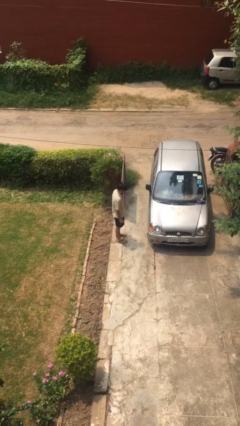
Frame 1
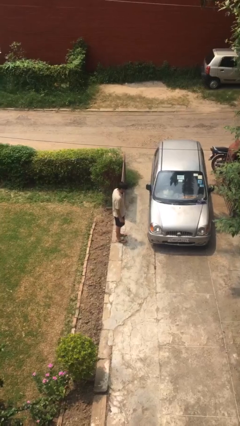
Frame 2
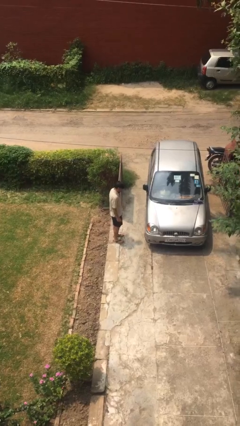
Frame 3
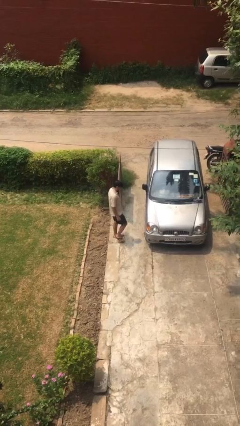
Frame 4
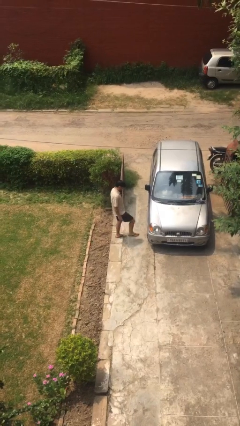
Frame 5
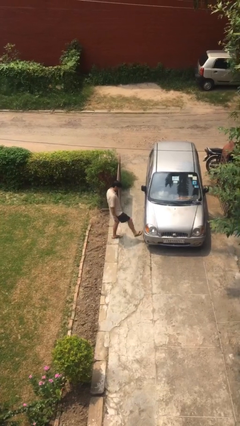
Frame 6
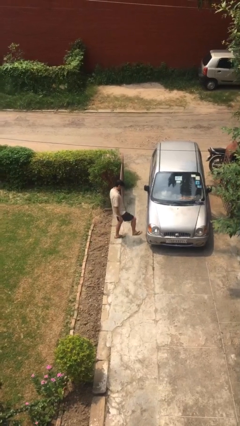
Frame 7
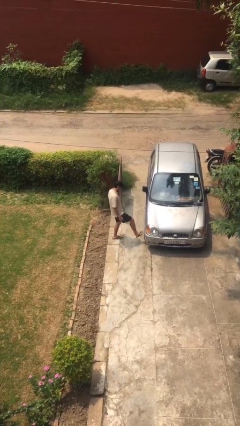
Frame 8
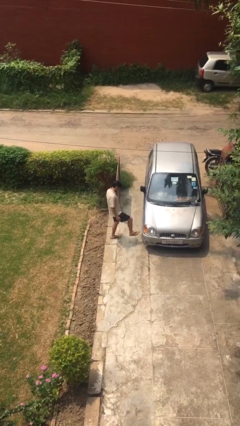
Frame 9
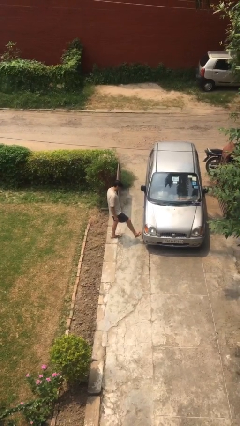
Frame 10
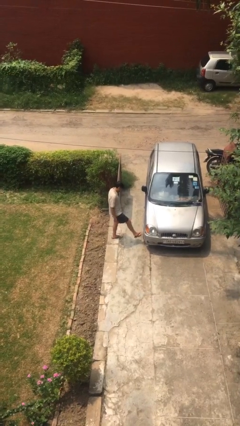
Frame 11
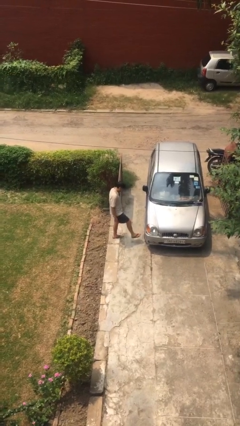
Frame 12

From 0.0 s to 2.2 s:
person kicks car tires

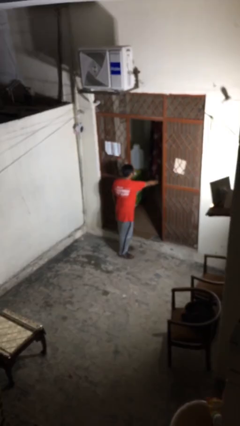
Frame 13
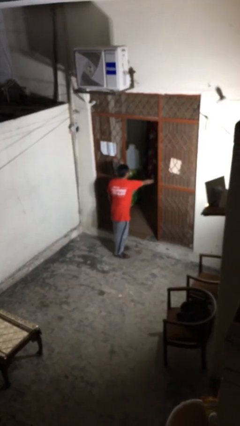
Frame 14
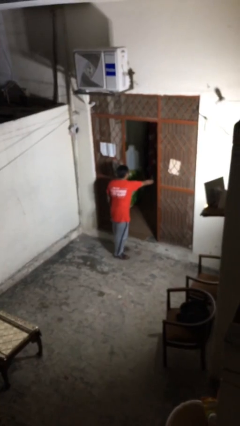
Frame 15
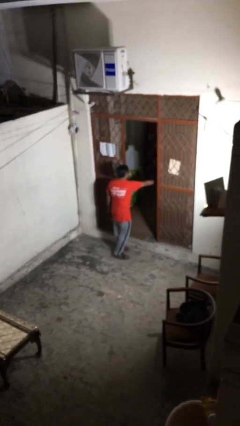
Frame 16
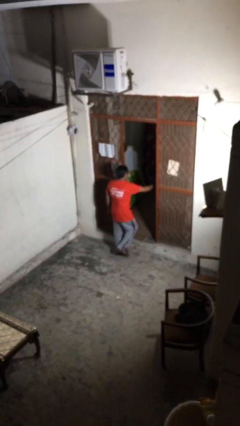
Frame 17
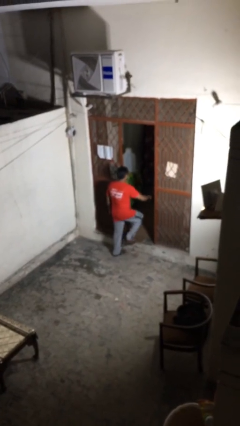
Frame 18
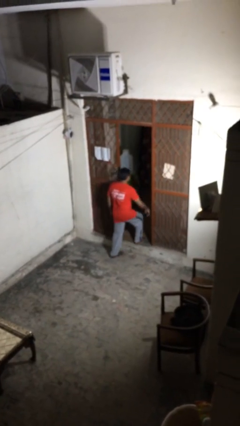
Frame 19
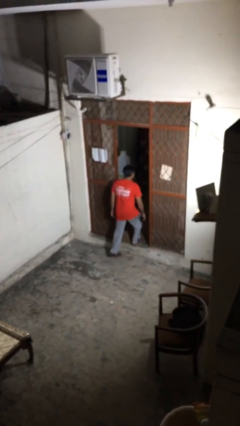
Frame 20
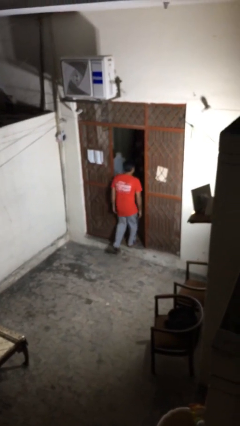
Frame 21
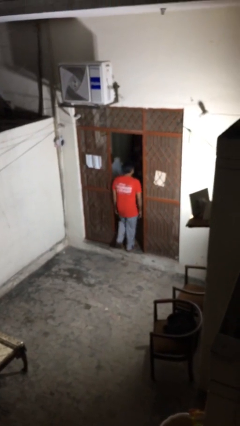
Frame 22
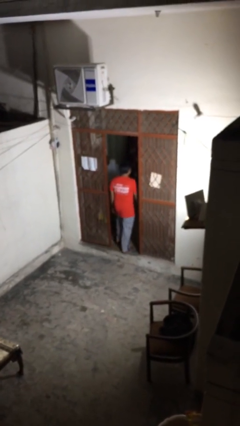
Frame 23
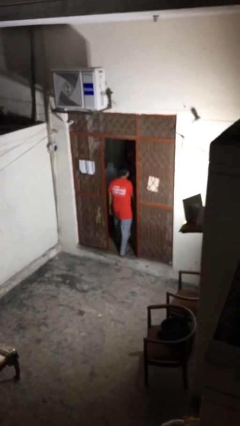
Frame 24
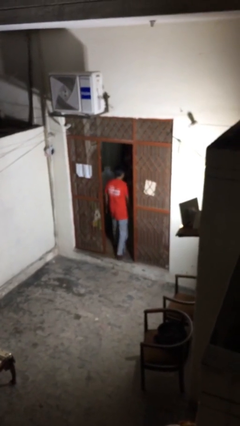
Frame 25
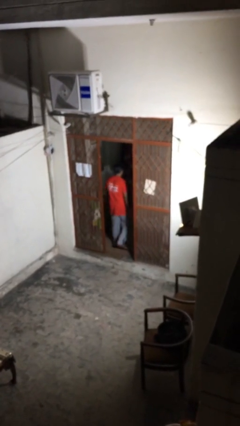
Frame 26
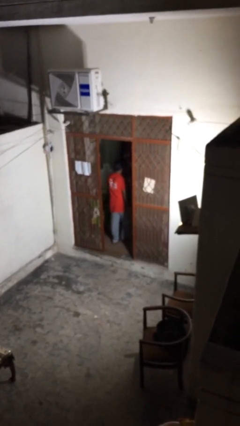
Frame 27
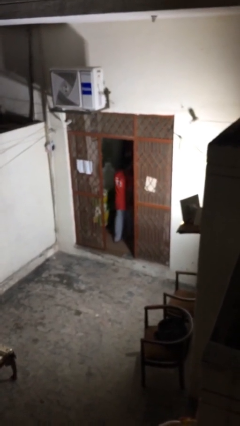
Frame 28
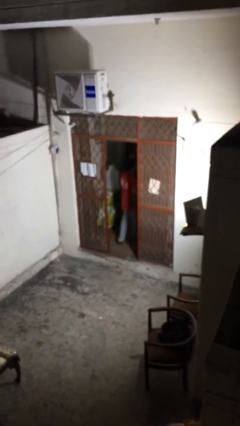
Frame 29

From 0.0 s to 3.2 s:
person exits scene through structure

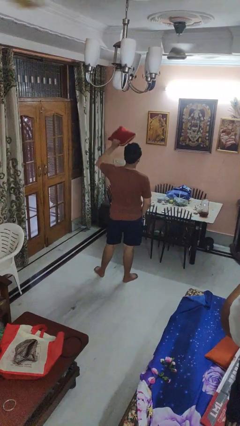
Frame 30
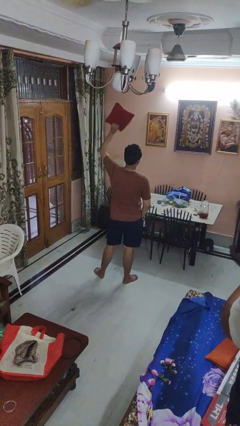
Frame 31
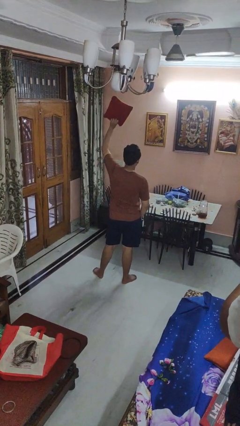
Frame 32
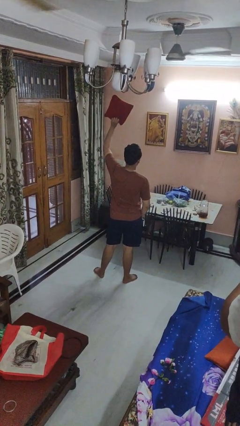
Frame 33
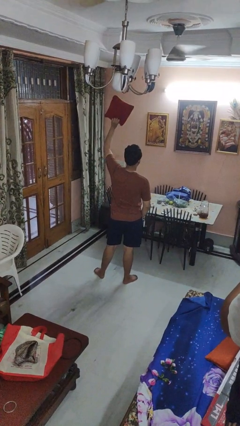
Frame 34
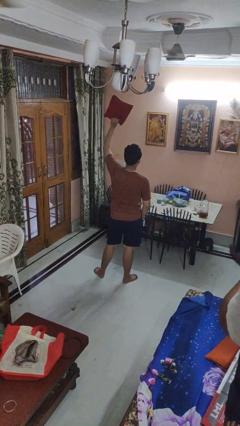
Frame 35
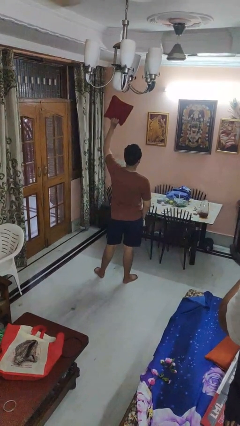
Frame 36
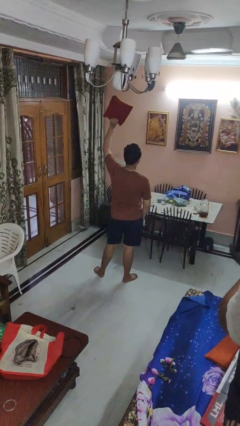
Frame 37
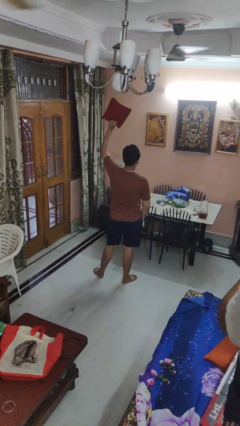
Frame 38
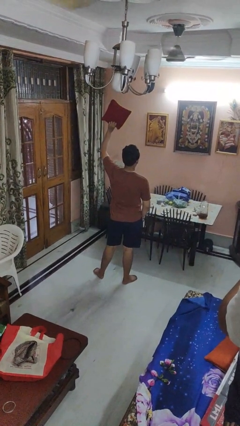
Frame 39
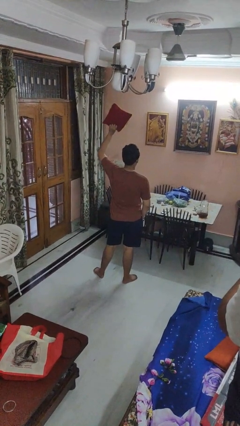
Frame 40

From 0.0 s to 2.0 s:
person holds object above head

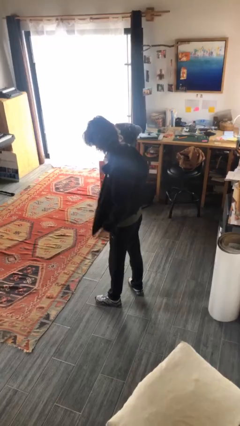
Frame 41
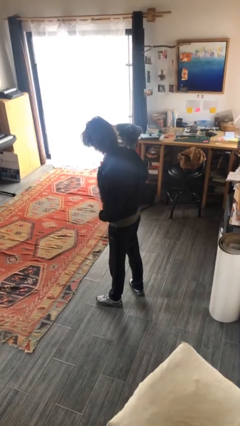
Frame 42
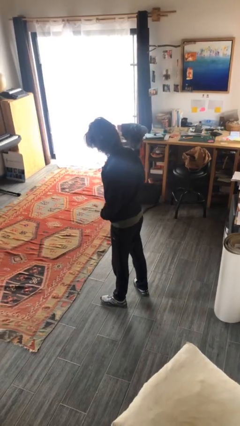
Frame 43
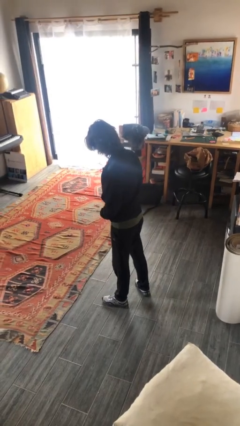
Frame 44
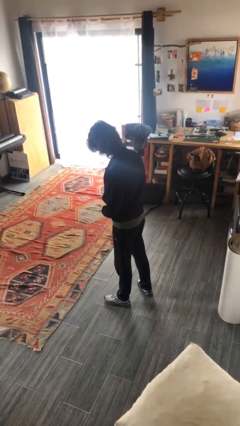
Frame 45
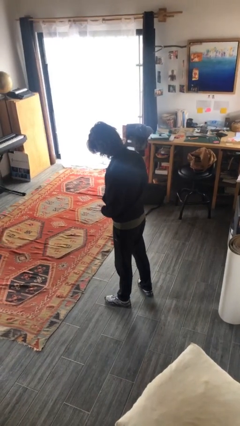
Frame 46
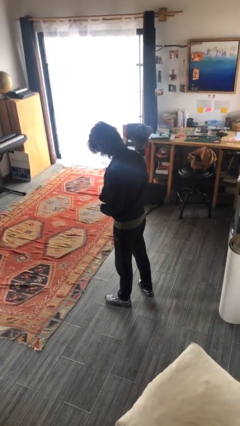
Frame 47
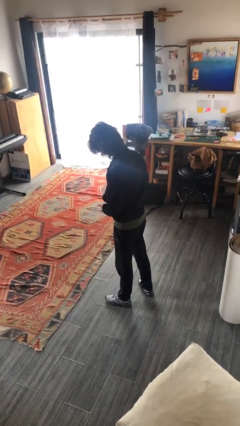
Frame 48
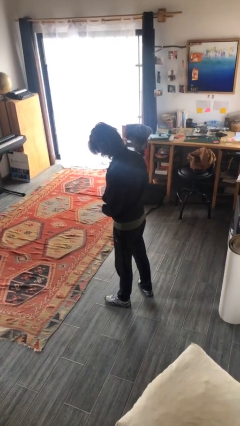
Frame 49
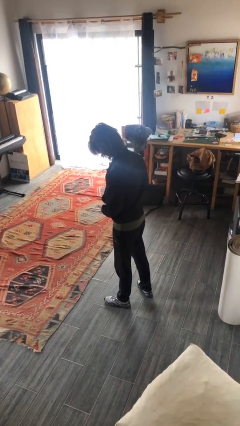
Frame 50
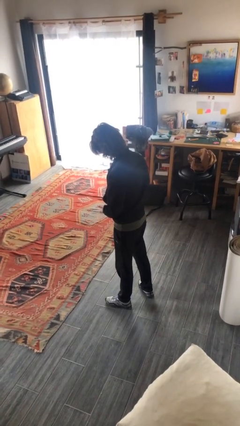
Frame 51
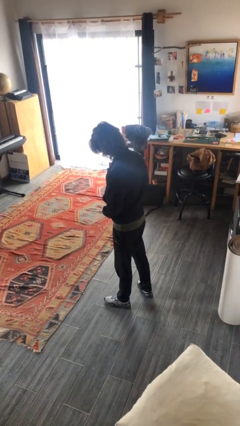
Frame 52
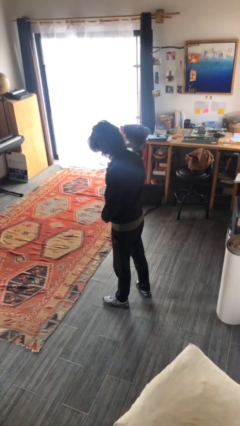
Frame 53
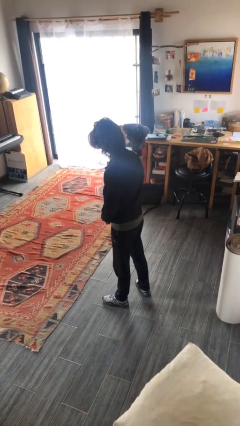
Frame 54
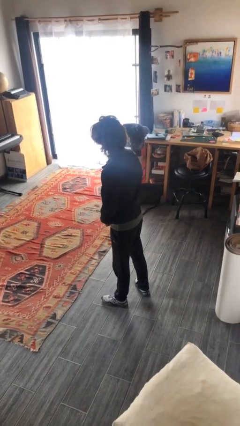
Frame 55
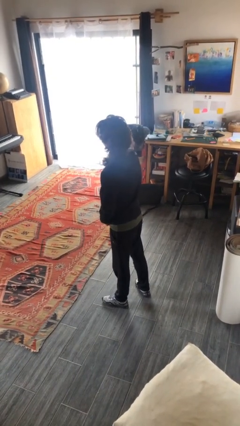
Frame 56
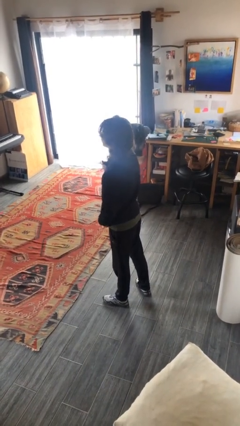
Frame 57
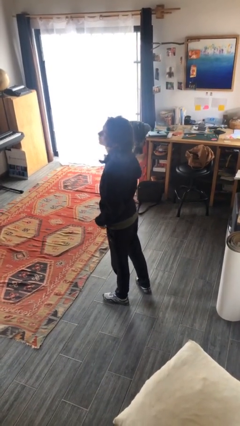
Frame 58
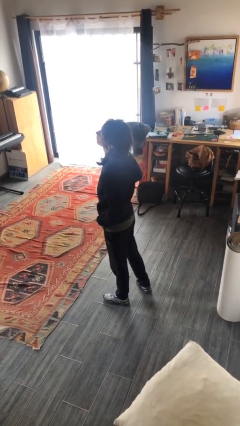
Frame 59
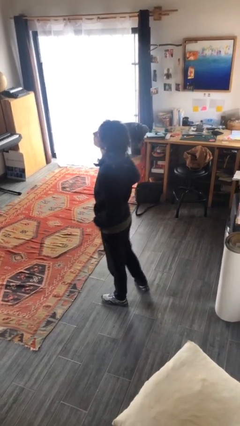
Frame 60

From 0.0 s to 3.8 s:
person zips up jacket

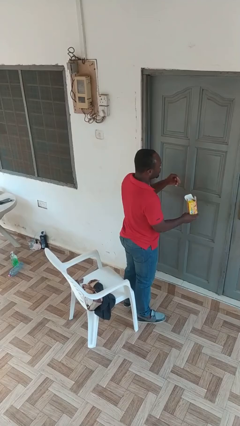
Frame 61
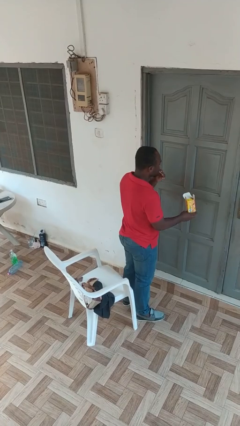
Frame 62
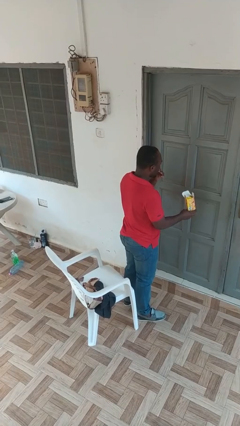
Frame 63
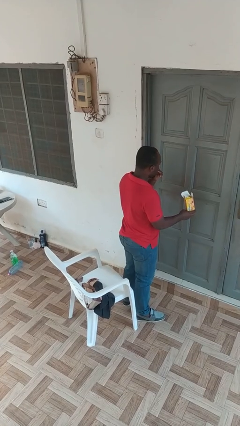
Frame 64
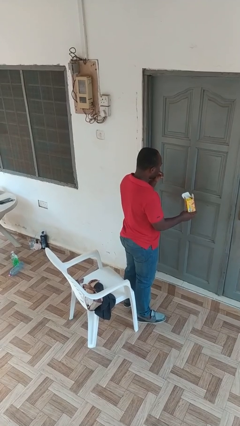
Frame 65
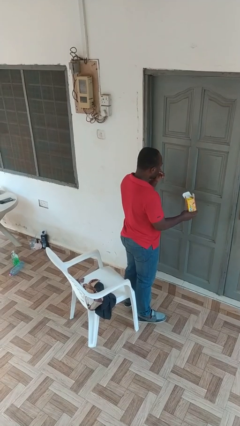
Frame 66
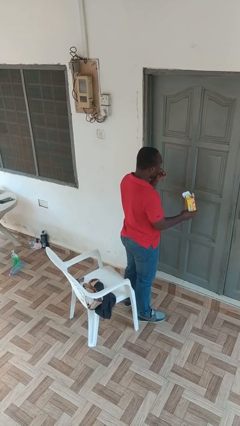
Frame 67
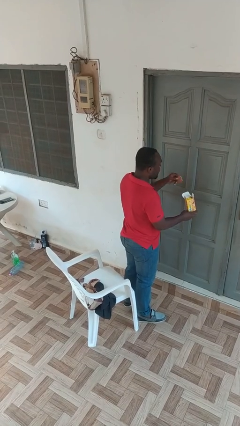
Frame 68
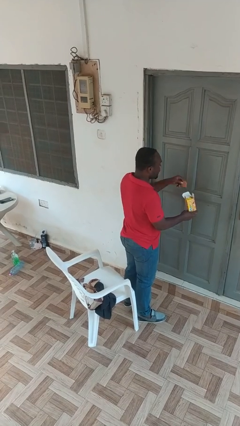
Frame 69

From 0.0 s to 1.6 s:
person eats snack from bag

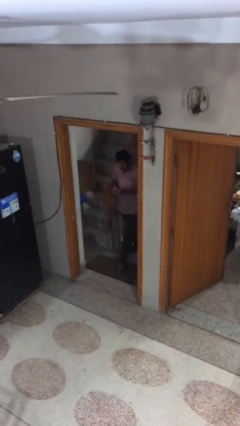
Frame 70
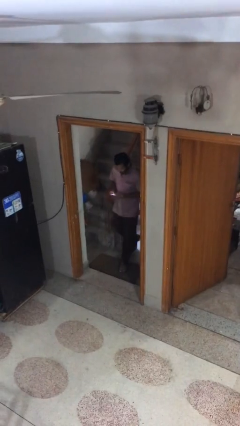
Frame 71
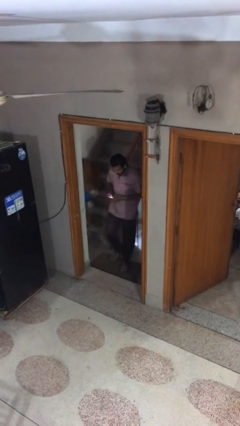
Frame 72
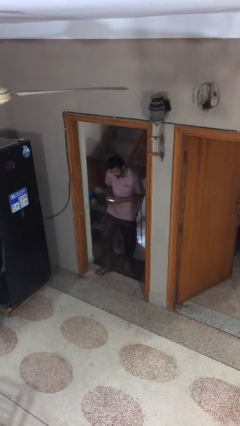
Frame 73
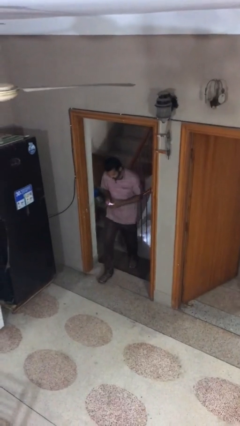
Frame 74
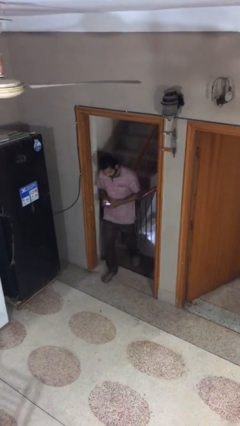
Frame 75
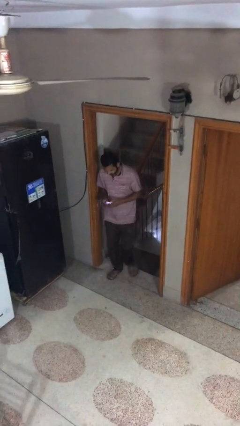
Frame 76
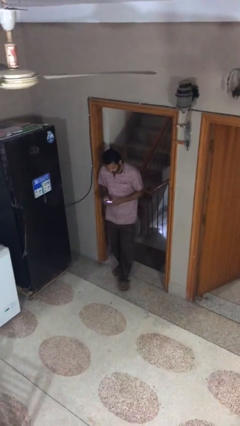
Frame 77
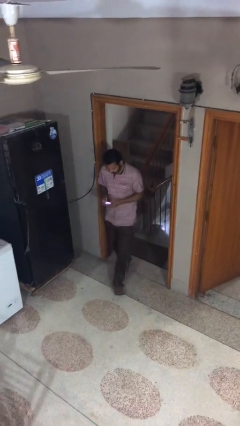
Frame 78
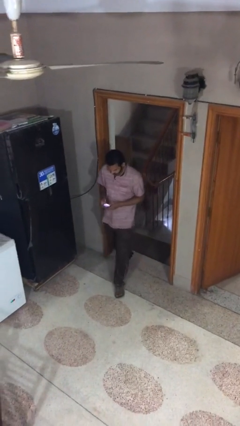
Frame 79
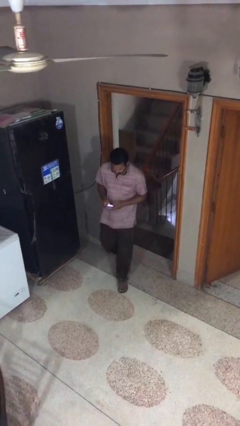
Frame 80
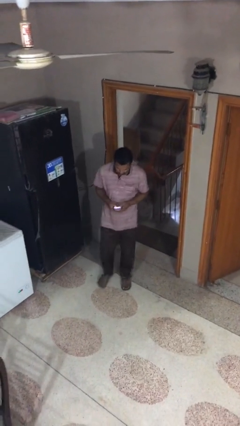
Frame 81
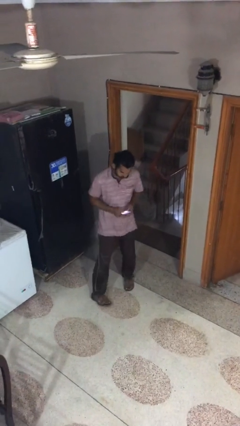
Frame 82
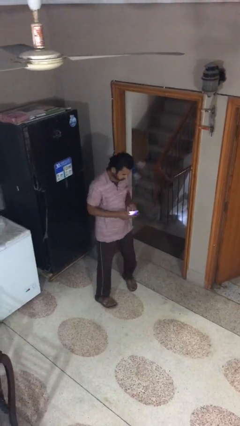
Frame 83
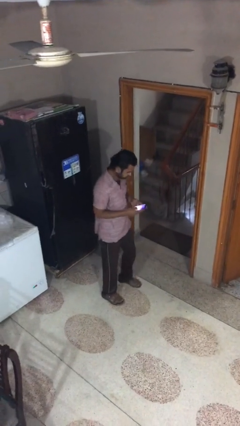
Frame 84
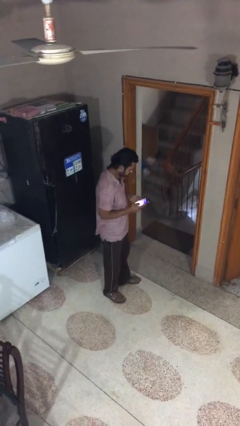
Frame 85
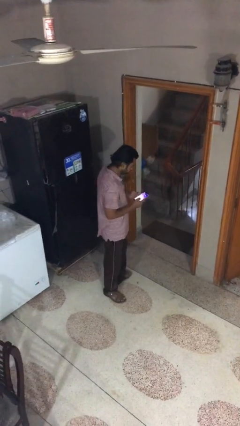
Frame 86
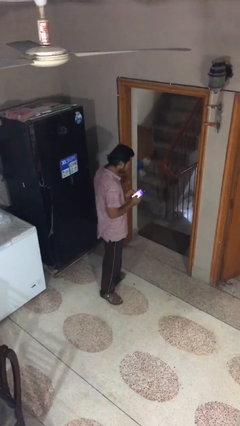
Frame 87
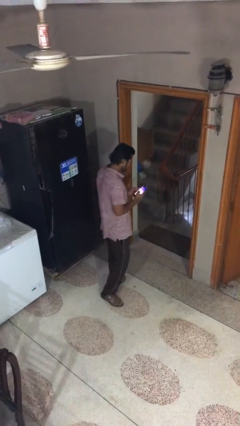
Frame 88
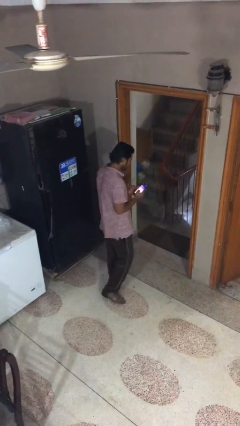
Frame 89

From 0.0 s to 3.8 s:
person enters scene through structure

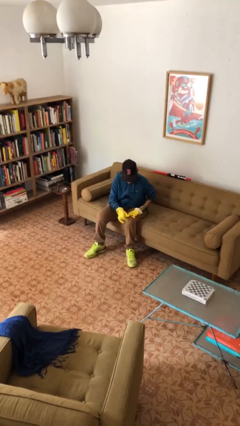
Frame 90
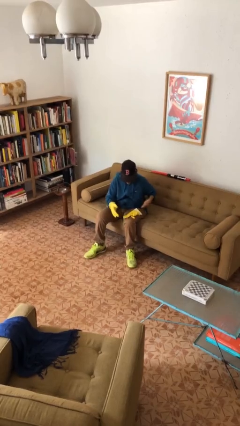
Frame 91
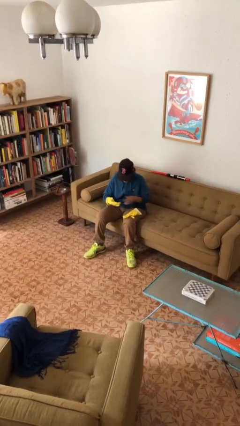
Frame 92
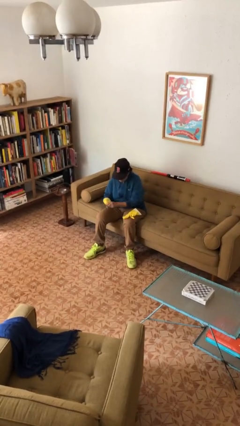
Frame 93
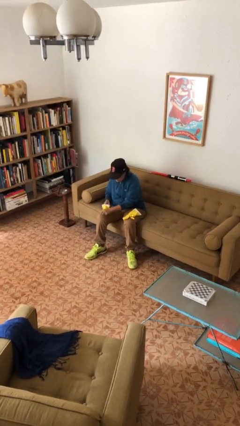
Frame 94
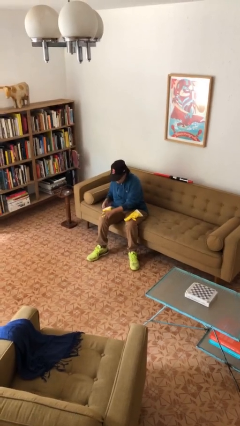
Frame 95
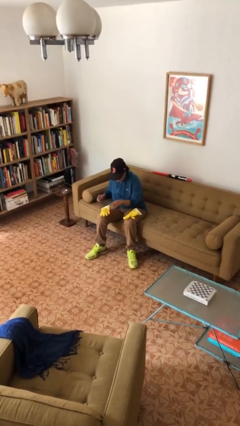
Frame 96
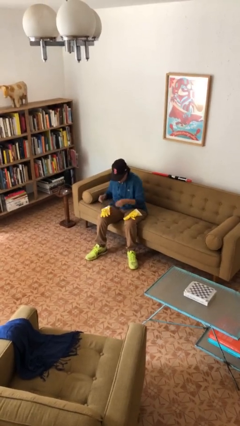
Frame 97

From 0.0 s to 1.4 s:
person takes off gloves
